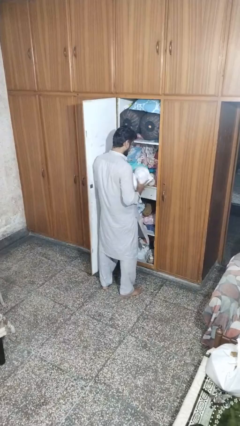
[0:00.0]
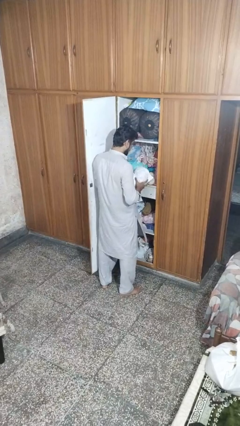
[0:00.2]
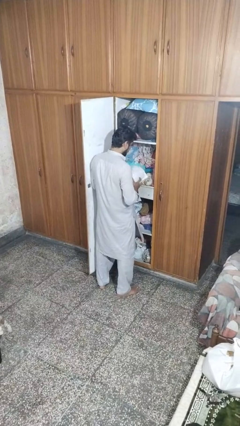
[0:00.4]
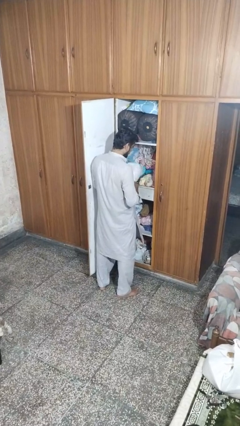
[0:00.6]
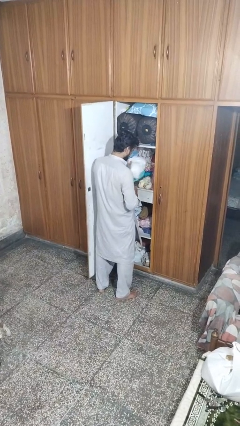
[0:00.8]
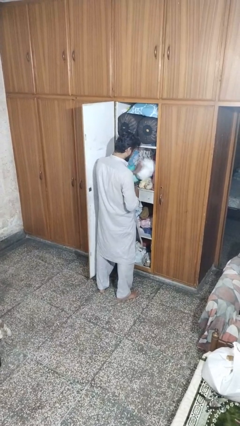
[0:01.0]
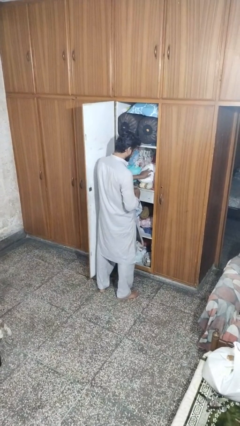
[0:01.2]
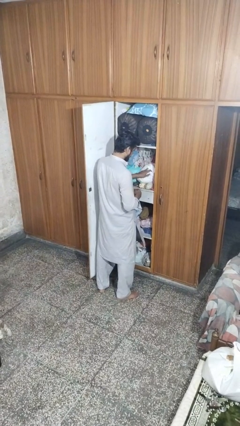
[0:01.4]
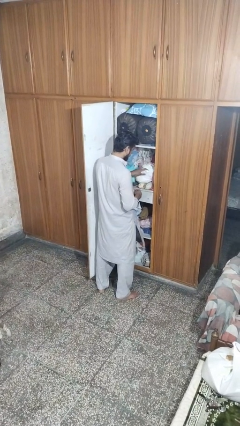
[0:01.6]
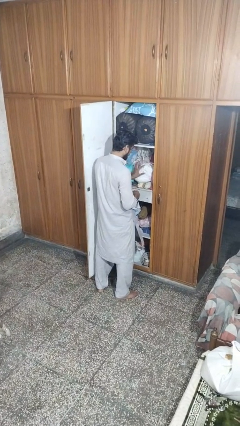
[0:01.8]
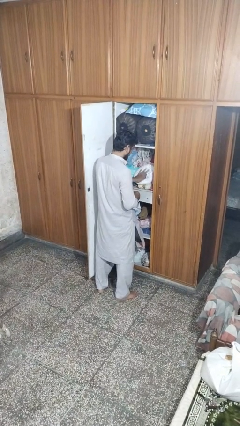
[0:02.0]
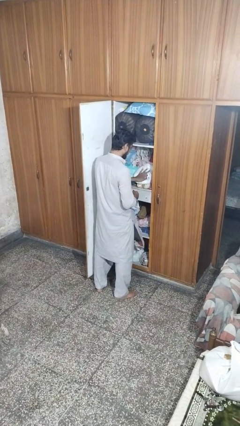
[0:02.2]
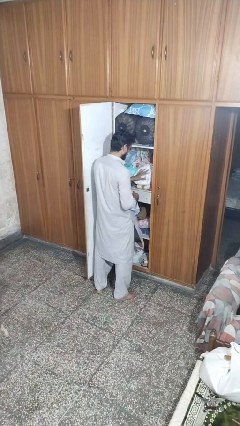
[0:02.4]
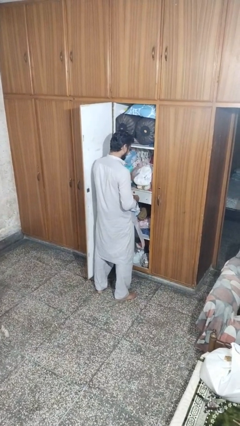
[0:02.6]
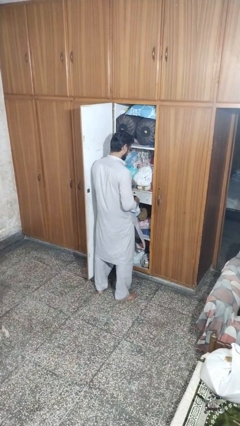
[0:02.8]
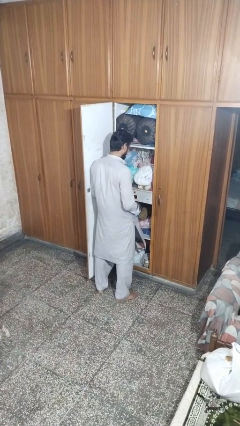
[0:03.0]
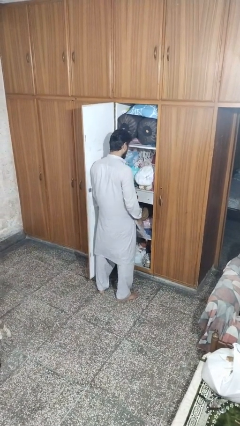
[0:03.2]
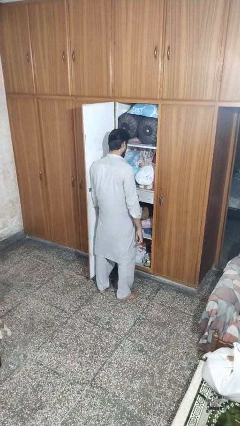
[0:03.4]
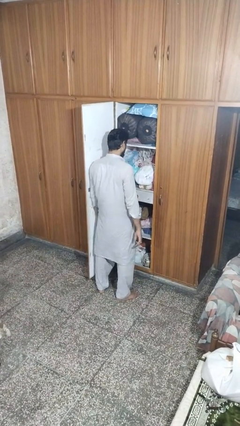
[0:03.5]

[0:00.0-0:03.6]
person puts down object into cabinet

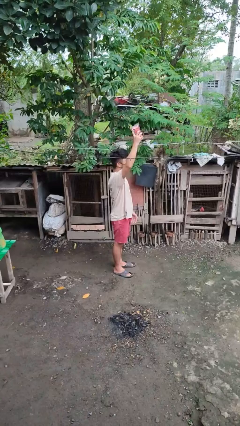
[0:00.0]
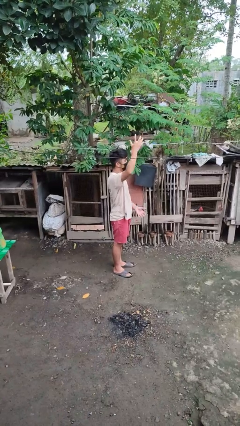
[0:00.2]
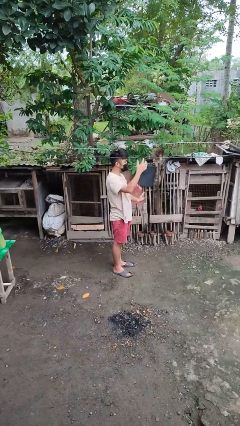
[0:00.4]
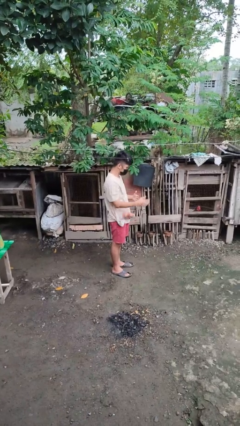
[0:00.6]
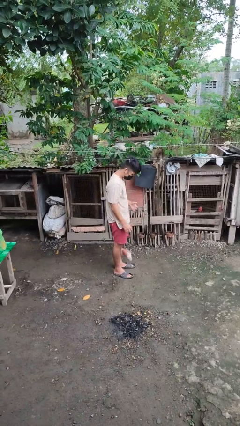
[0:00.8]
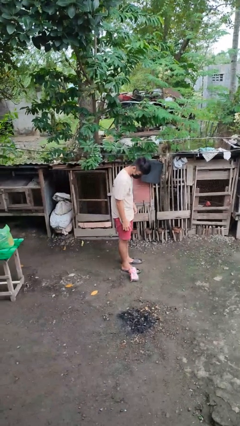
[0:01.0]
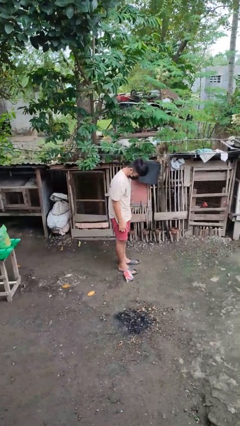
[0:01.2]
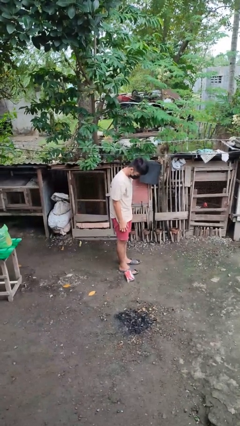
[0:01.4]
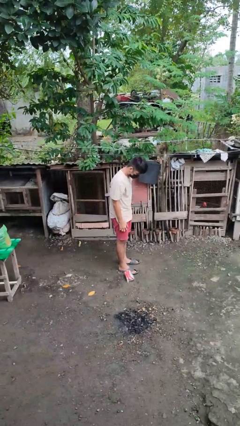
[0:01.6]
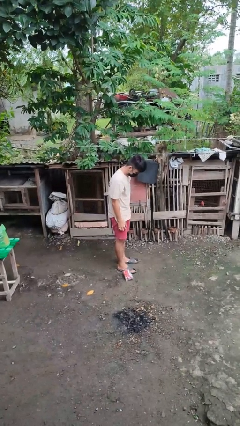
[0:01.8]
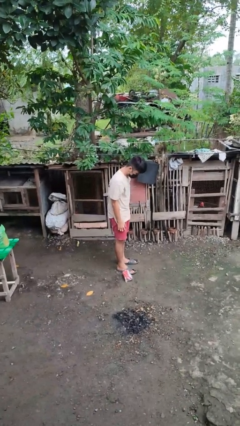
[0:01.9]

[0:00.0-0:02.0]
person drops object

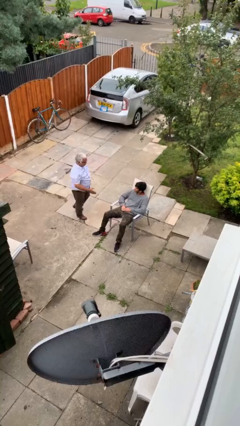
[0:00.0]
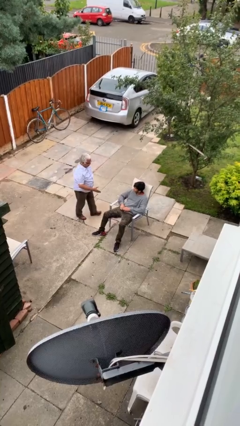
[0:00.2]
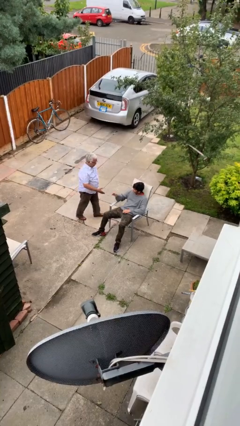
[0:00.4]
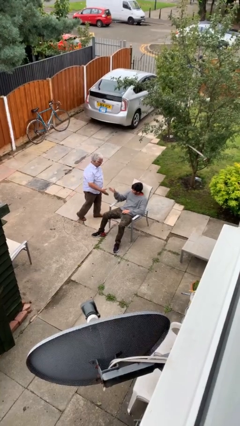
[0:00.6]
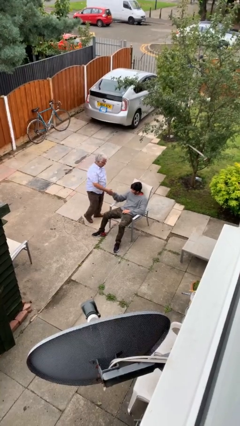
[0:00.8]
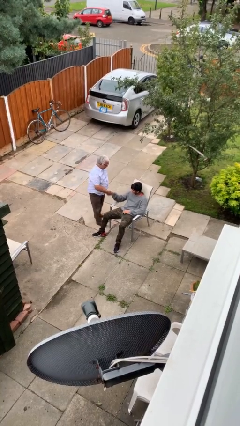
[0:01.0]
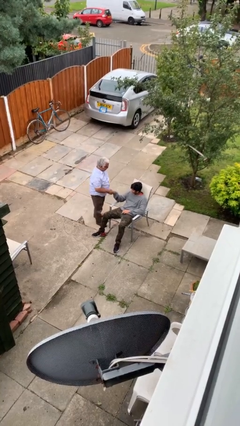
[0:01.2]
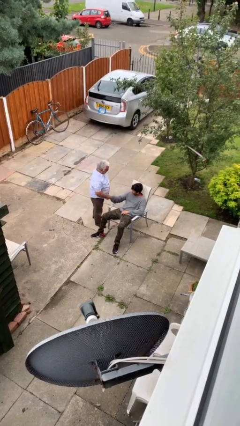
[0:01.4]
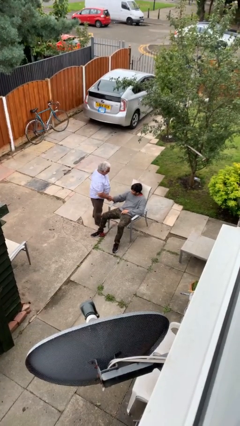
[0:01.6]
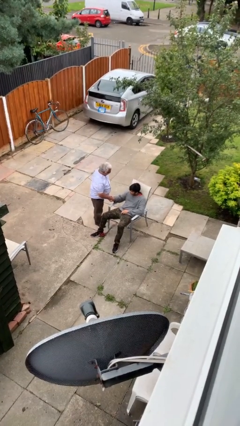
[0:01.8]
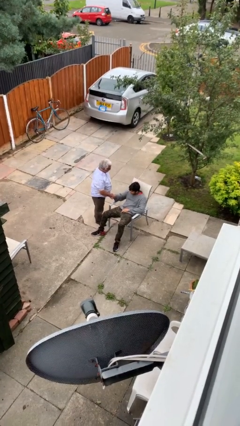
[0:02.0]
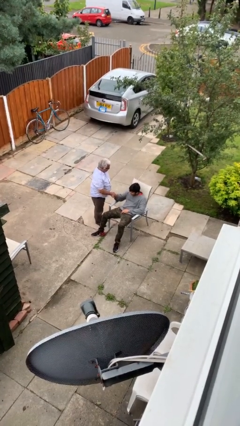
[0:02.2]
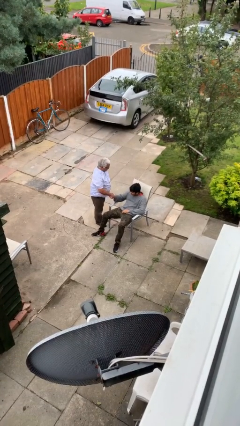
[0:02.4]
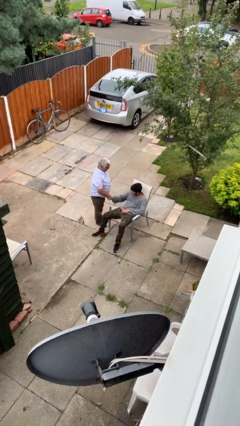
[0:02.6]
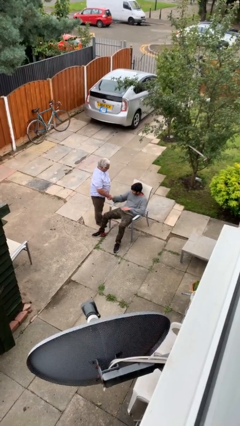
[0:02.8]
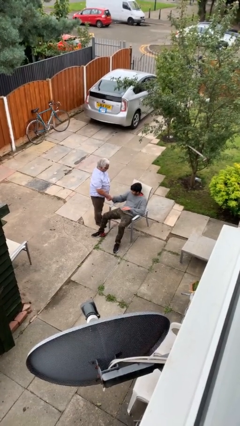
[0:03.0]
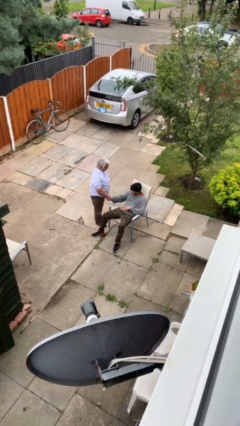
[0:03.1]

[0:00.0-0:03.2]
person shakes hand

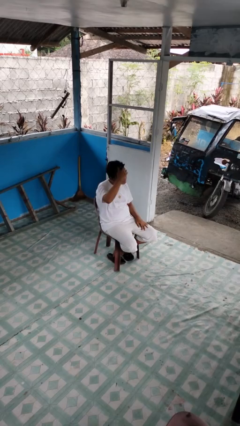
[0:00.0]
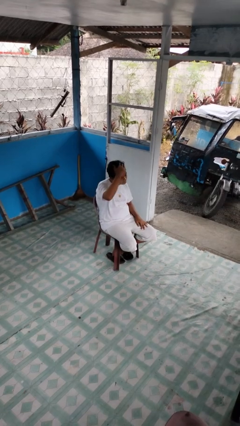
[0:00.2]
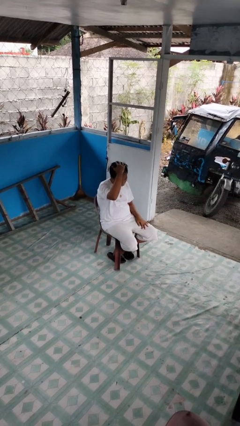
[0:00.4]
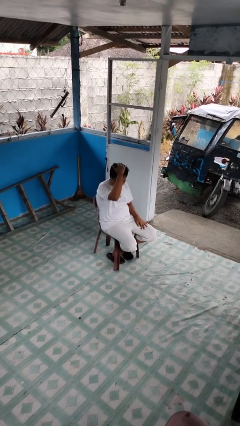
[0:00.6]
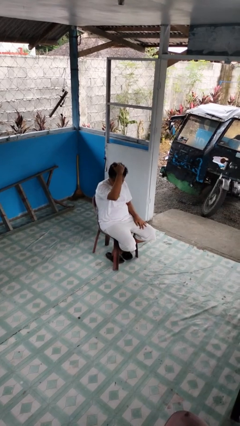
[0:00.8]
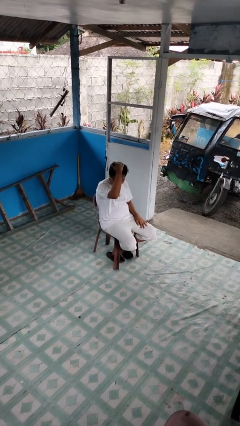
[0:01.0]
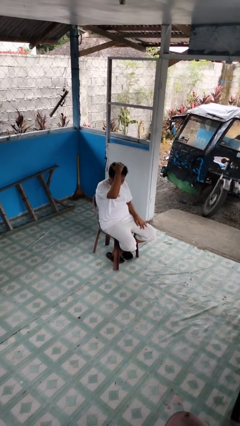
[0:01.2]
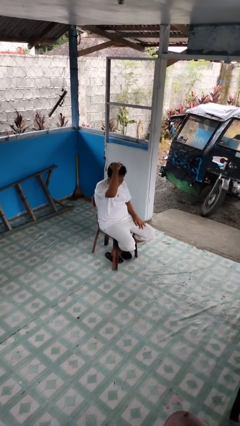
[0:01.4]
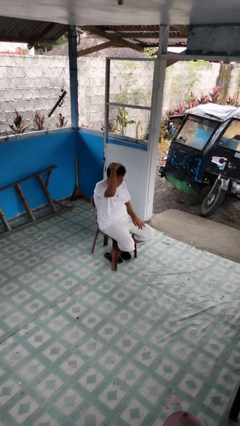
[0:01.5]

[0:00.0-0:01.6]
person pats head

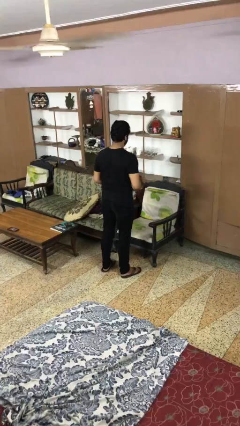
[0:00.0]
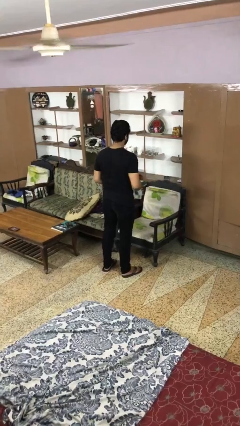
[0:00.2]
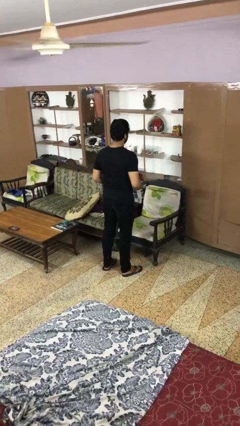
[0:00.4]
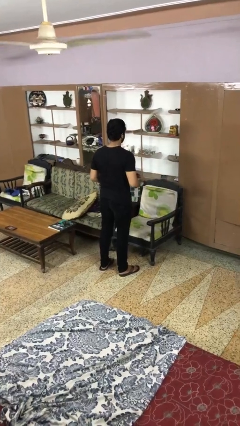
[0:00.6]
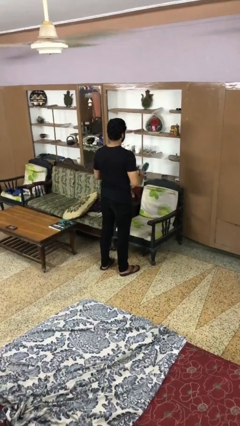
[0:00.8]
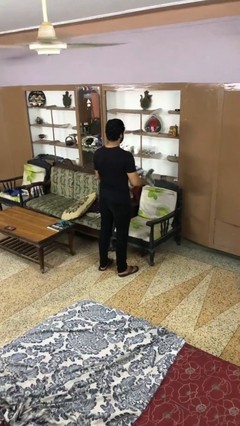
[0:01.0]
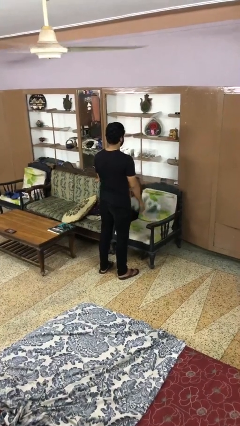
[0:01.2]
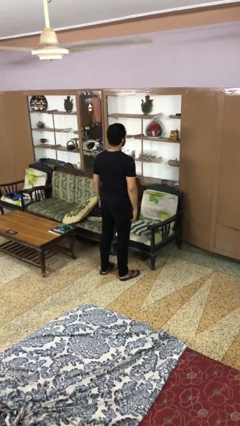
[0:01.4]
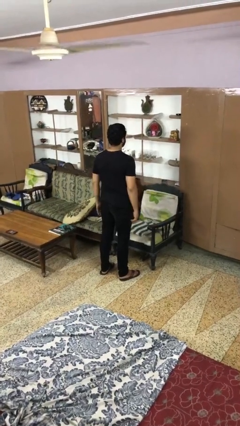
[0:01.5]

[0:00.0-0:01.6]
person puts down object on couch

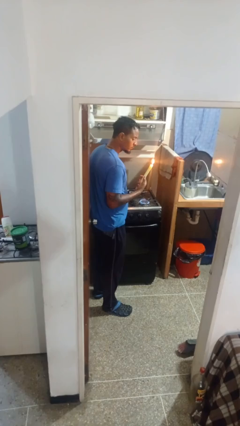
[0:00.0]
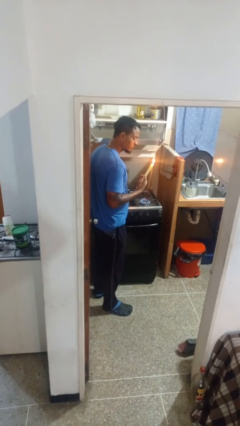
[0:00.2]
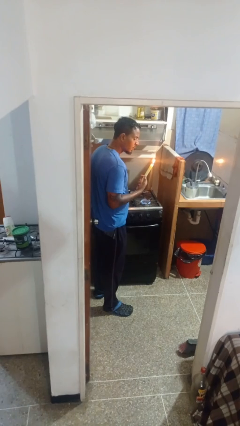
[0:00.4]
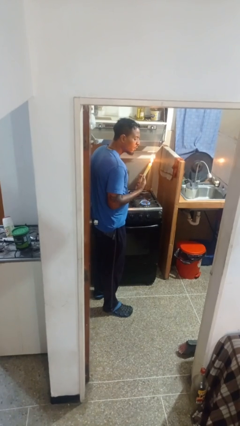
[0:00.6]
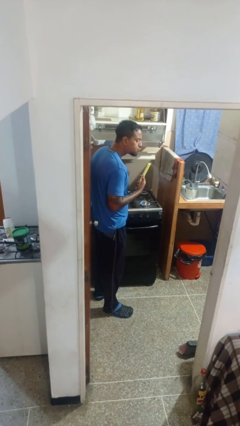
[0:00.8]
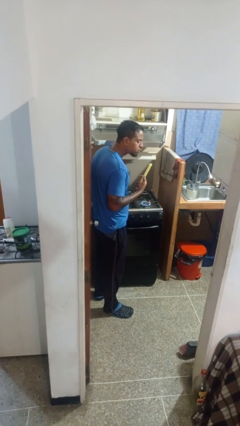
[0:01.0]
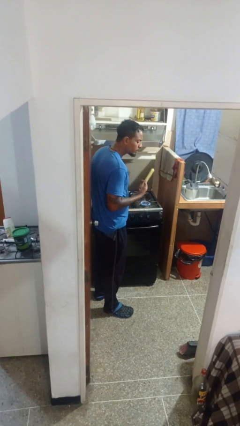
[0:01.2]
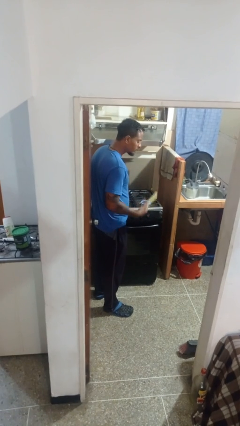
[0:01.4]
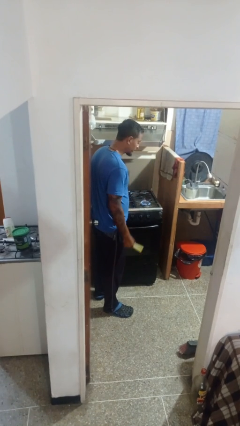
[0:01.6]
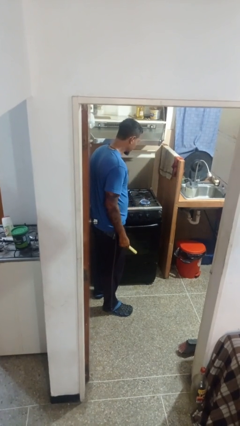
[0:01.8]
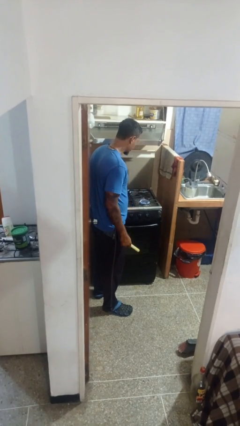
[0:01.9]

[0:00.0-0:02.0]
person extinguishes candle

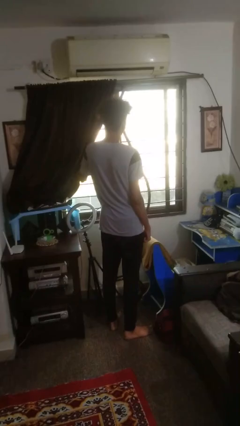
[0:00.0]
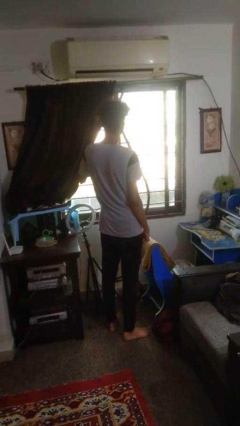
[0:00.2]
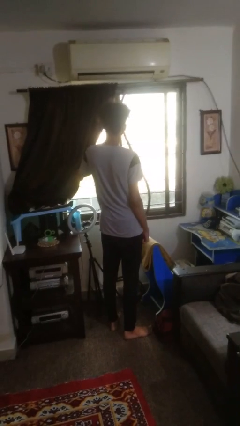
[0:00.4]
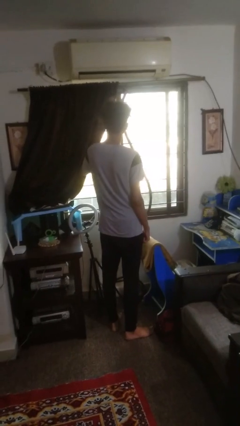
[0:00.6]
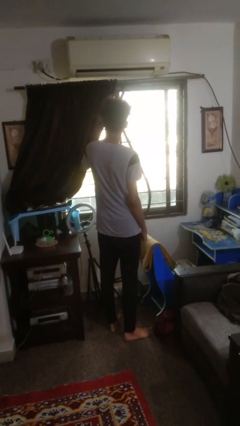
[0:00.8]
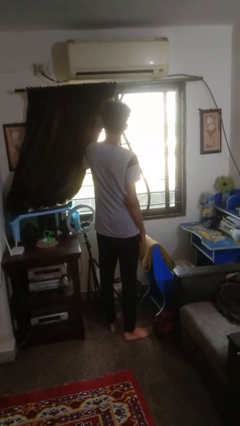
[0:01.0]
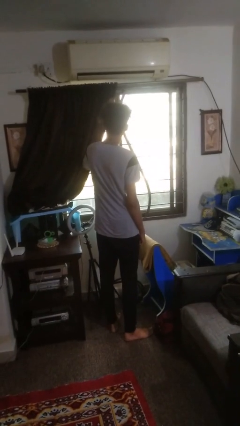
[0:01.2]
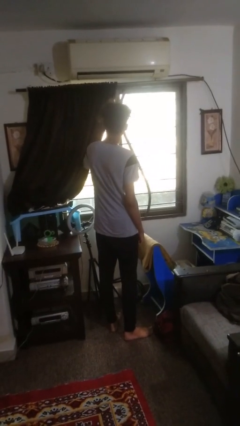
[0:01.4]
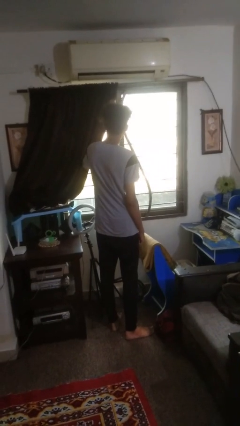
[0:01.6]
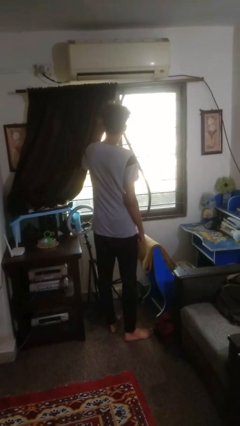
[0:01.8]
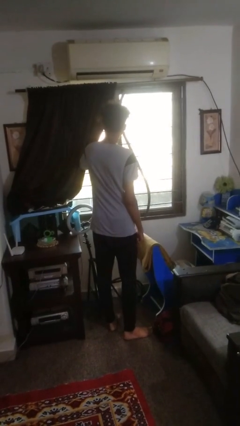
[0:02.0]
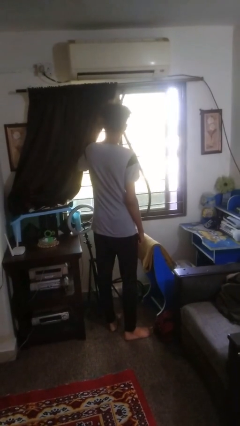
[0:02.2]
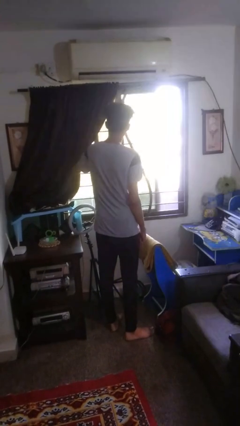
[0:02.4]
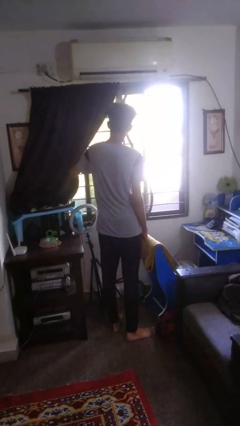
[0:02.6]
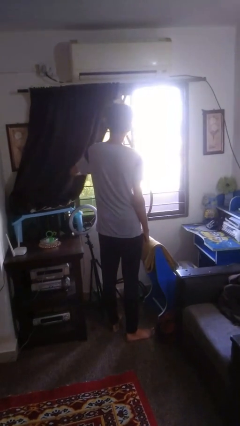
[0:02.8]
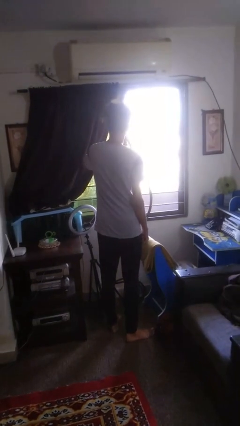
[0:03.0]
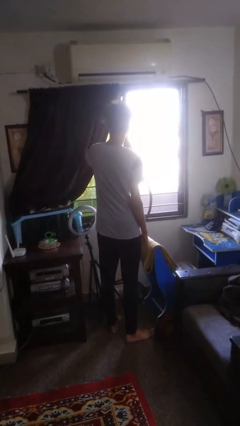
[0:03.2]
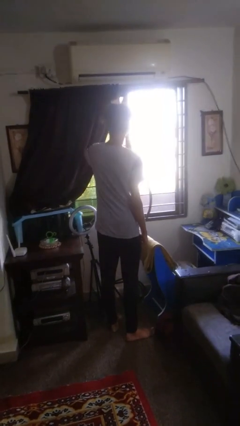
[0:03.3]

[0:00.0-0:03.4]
person opens home window
